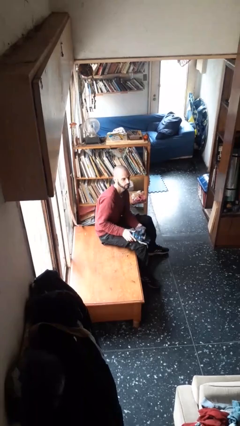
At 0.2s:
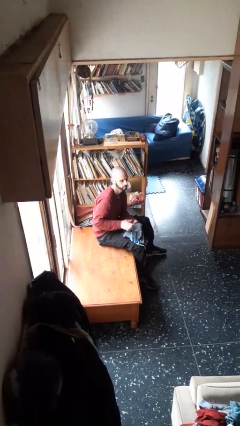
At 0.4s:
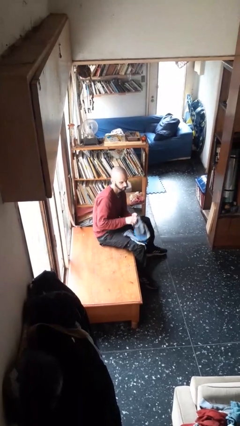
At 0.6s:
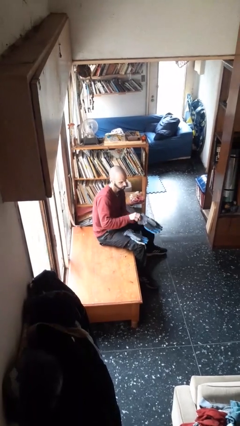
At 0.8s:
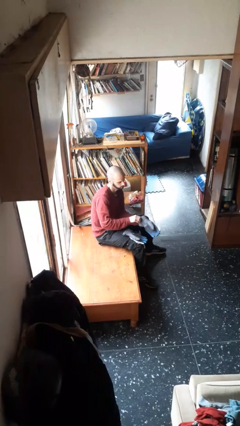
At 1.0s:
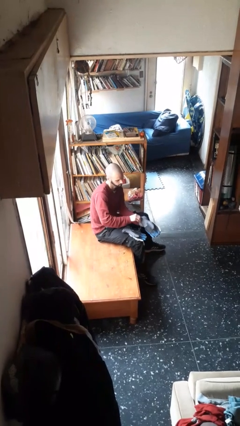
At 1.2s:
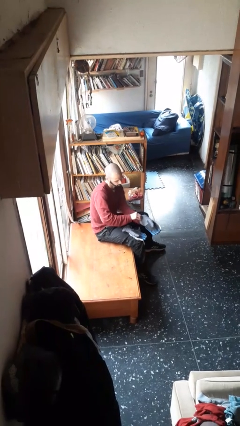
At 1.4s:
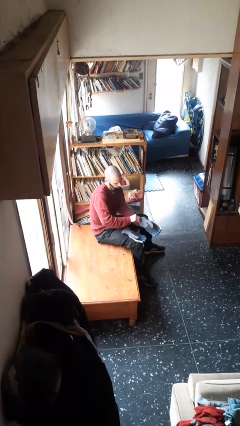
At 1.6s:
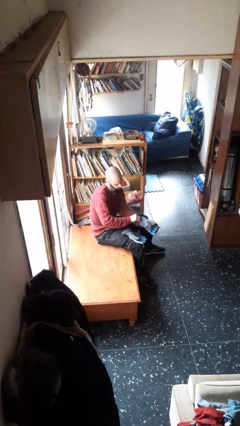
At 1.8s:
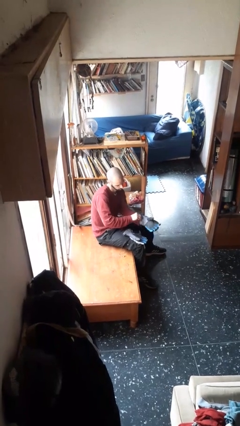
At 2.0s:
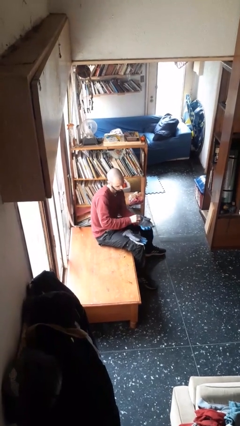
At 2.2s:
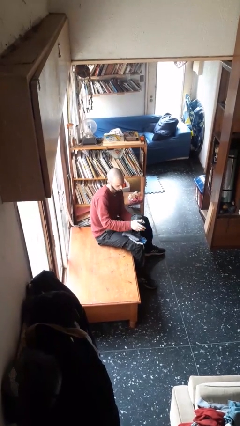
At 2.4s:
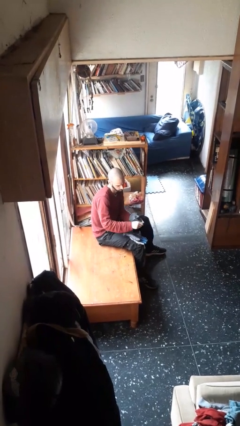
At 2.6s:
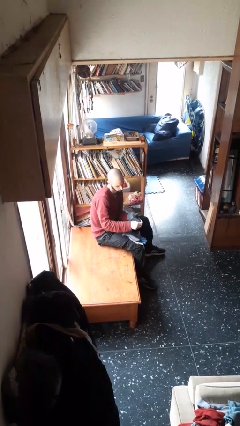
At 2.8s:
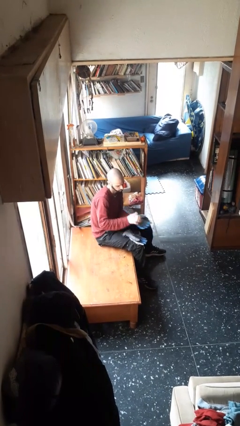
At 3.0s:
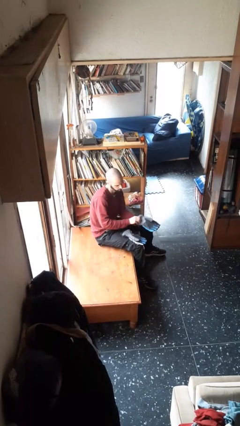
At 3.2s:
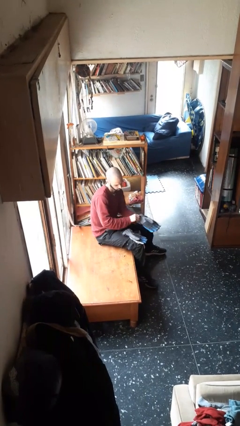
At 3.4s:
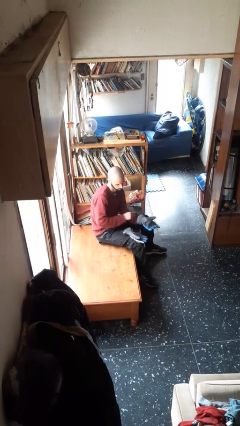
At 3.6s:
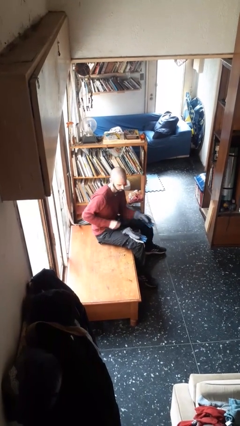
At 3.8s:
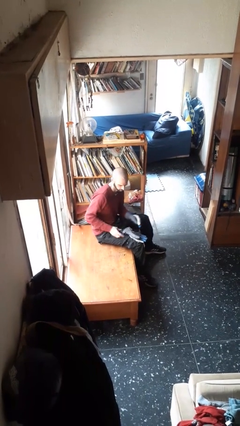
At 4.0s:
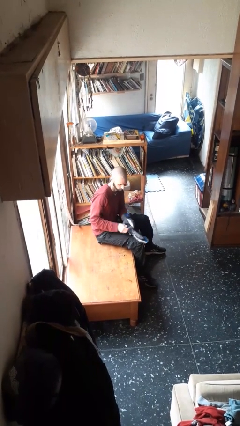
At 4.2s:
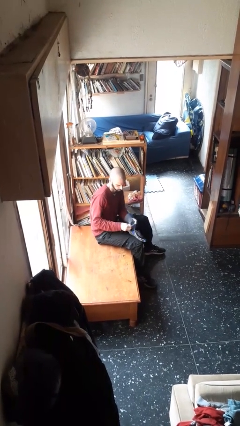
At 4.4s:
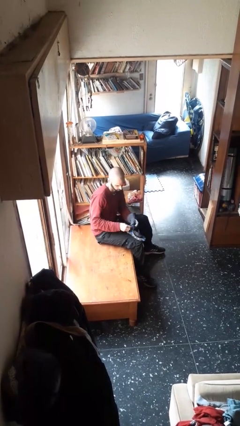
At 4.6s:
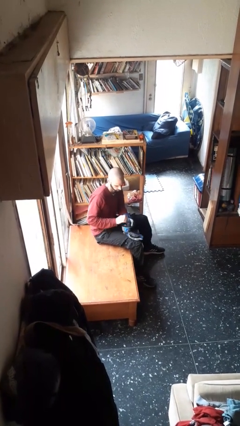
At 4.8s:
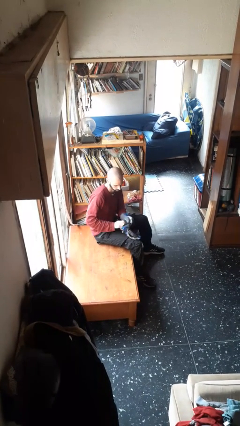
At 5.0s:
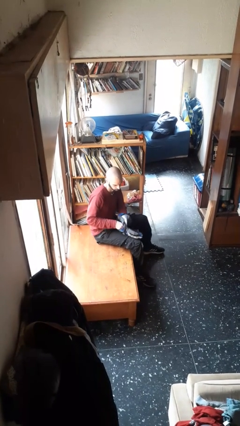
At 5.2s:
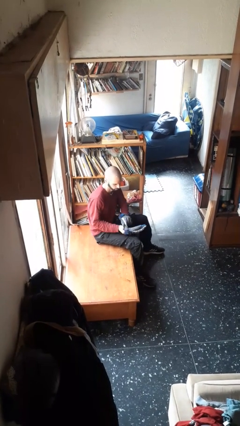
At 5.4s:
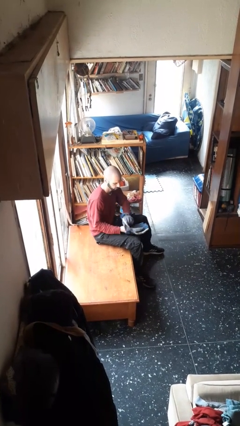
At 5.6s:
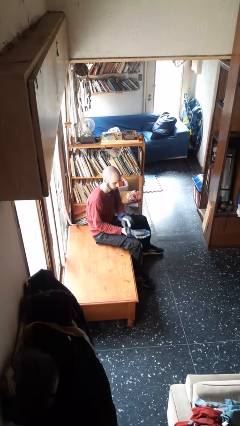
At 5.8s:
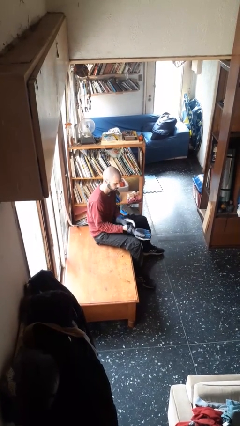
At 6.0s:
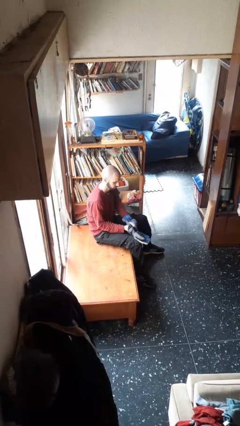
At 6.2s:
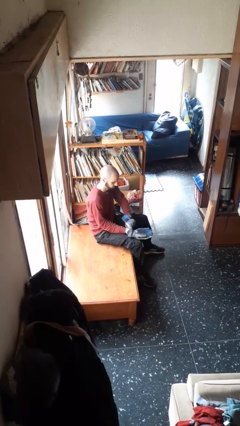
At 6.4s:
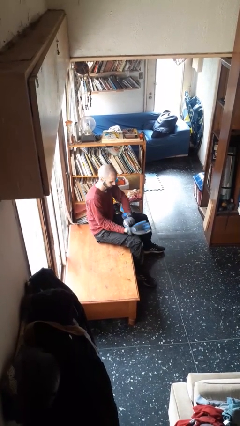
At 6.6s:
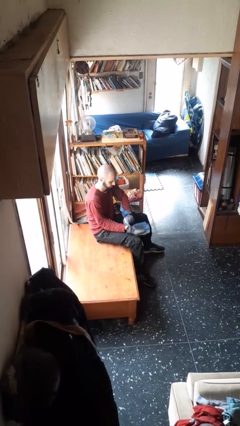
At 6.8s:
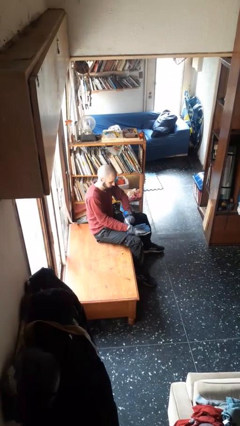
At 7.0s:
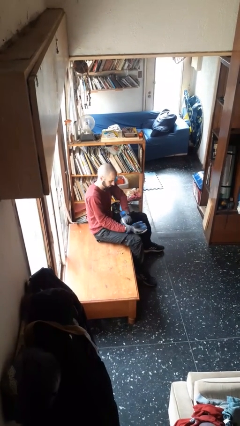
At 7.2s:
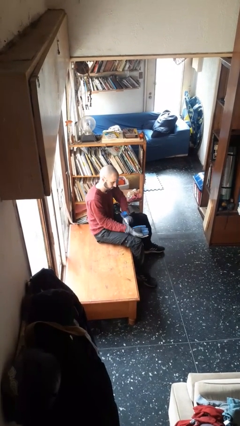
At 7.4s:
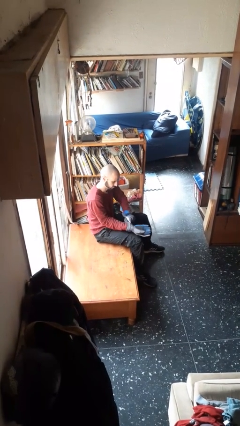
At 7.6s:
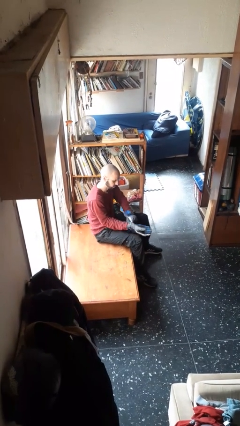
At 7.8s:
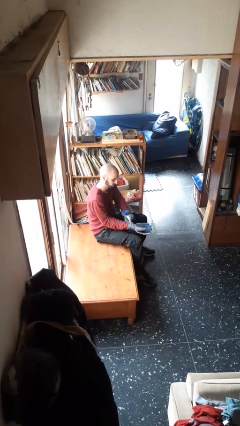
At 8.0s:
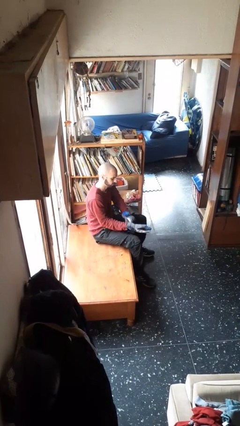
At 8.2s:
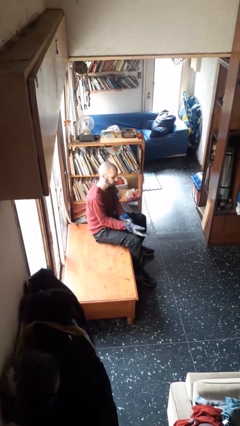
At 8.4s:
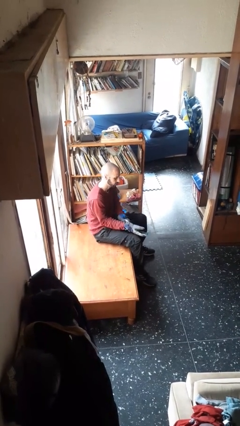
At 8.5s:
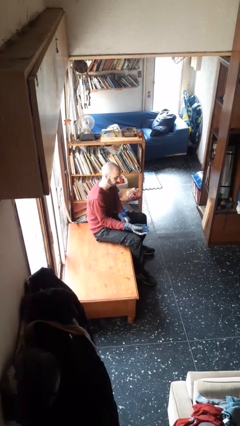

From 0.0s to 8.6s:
person puts on gloves

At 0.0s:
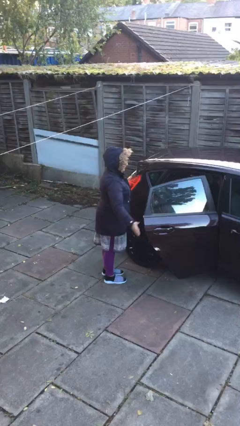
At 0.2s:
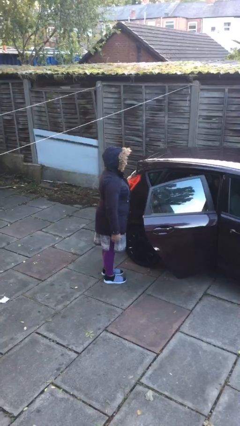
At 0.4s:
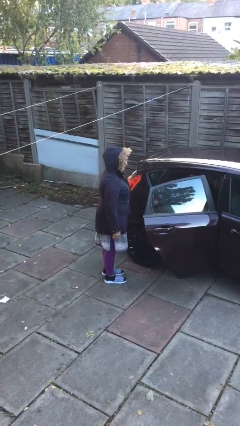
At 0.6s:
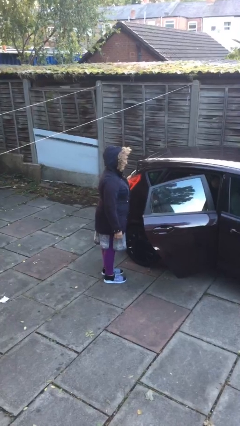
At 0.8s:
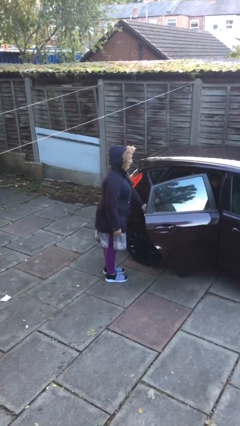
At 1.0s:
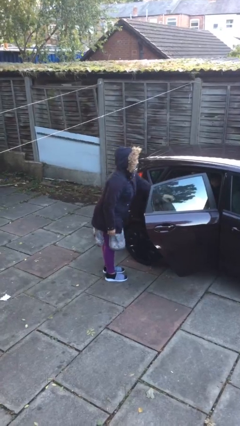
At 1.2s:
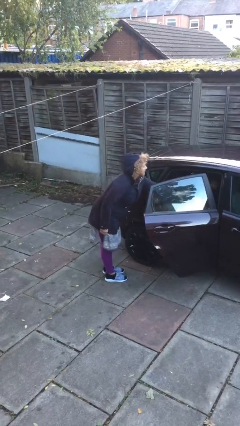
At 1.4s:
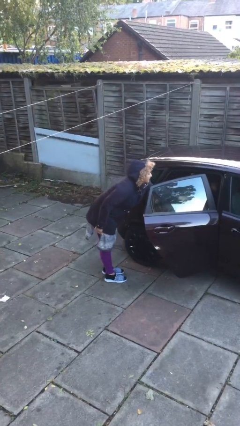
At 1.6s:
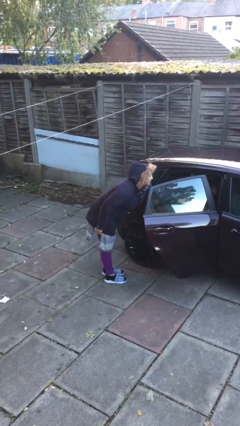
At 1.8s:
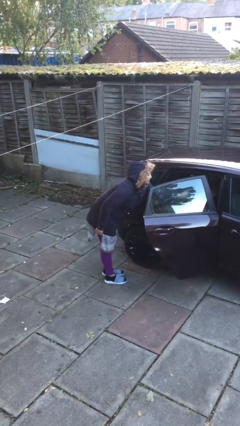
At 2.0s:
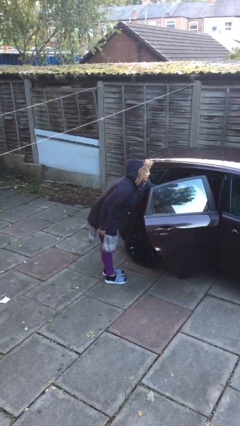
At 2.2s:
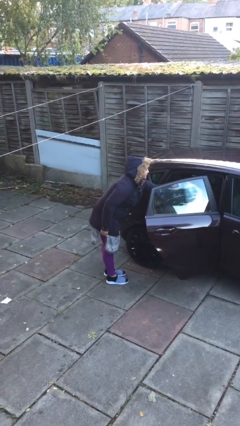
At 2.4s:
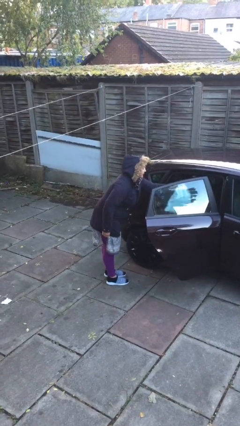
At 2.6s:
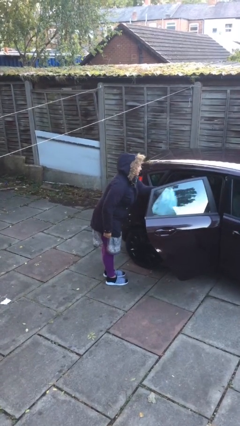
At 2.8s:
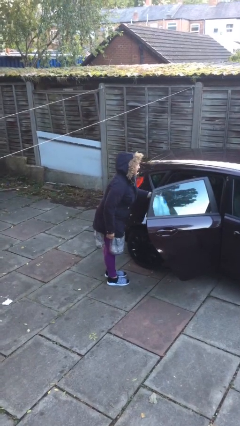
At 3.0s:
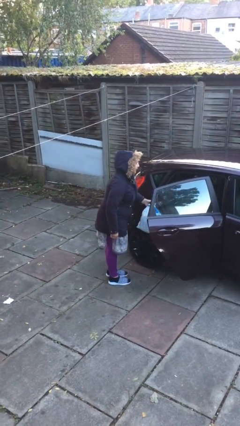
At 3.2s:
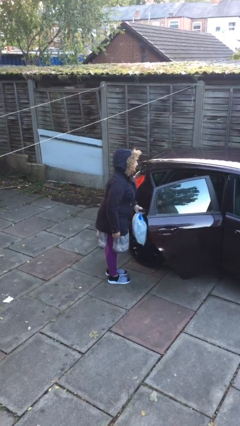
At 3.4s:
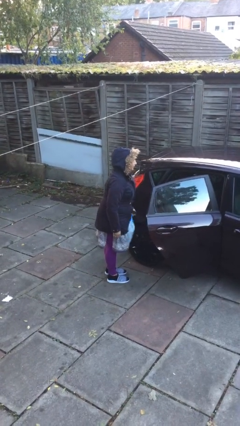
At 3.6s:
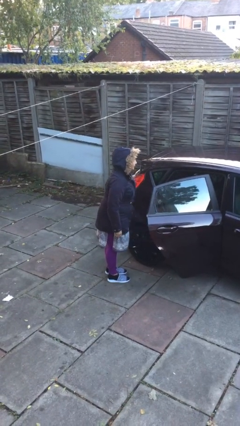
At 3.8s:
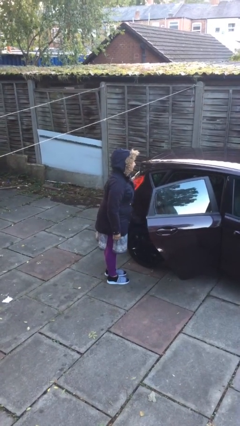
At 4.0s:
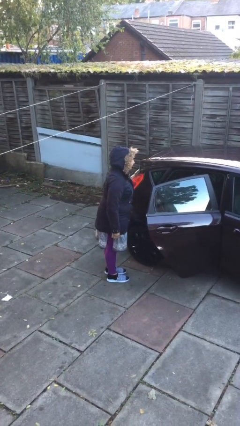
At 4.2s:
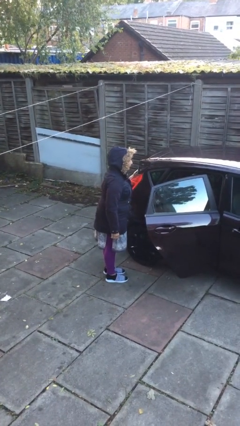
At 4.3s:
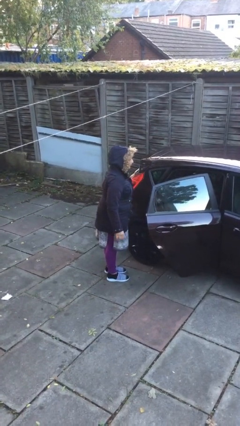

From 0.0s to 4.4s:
person unloads car

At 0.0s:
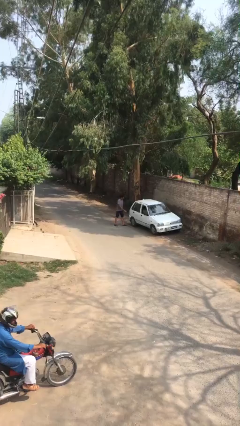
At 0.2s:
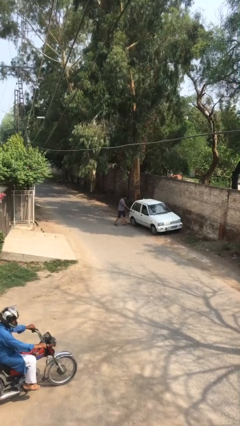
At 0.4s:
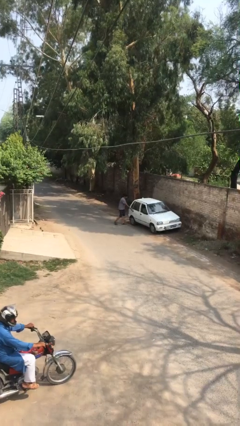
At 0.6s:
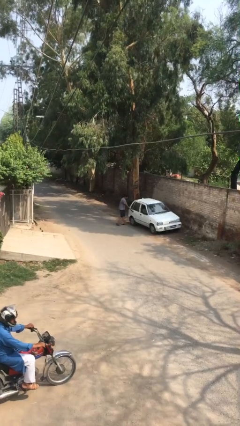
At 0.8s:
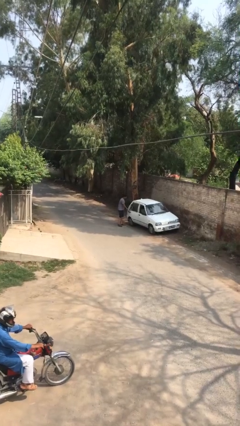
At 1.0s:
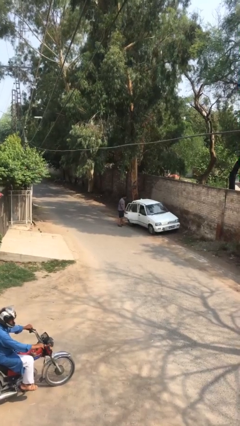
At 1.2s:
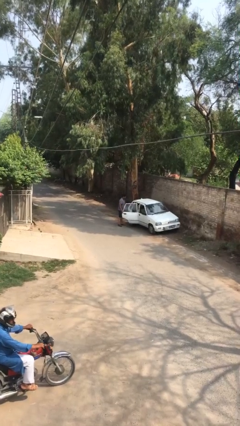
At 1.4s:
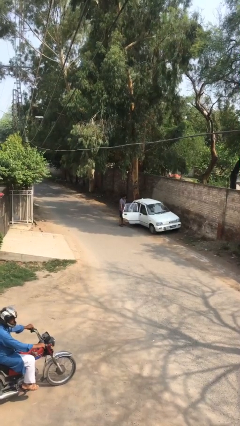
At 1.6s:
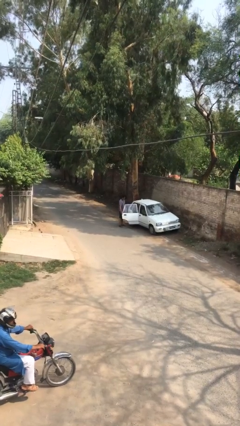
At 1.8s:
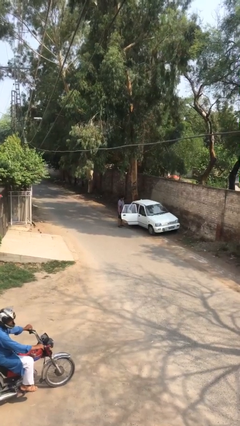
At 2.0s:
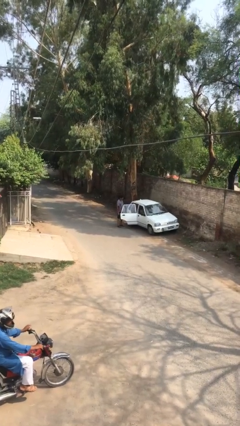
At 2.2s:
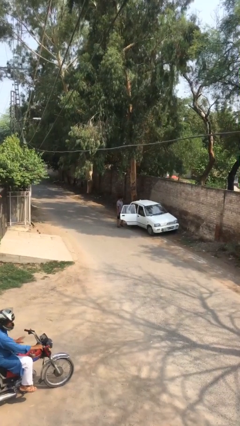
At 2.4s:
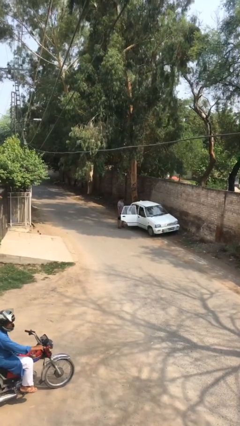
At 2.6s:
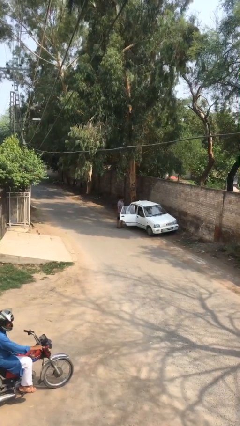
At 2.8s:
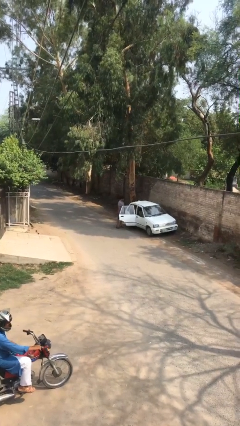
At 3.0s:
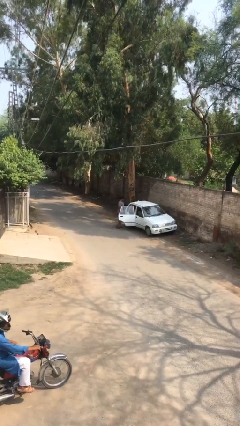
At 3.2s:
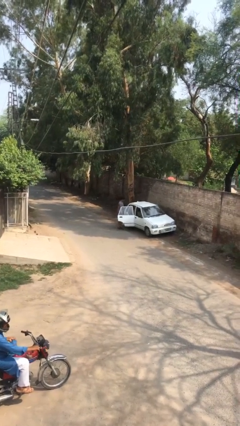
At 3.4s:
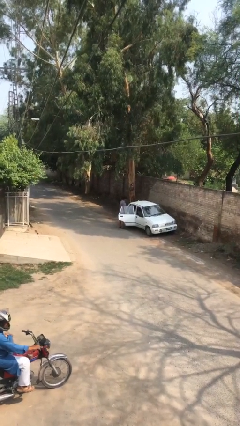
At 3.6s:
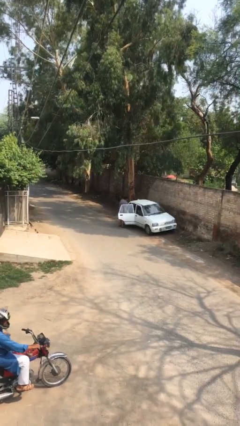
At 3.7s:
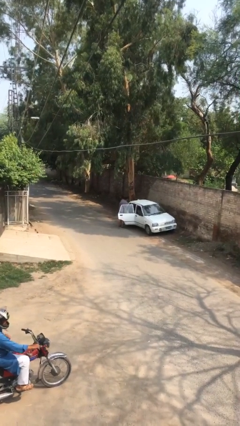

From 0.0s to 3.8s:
person opens car door

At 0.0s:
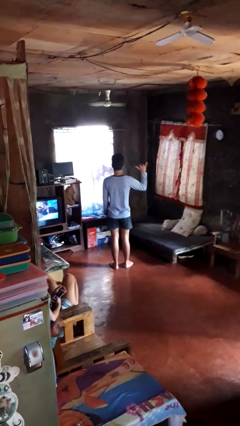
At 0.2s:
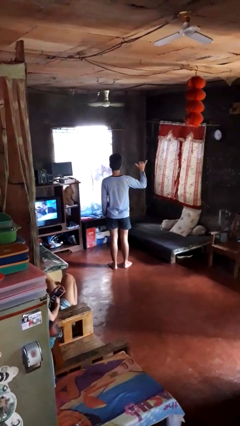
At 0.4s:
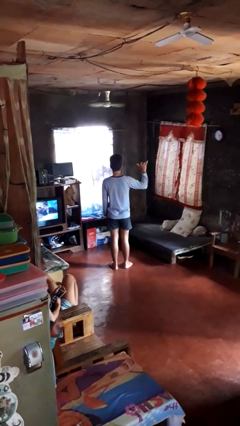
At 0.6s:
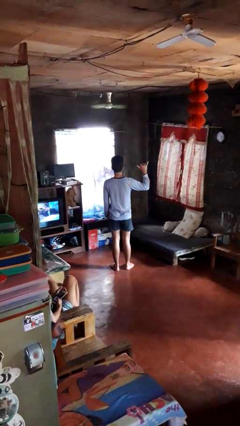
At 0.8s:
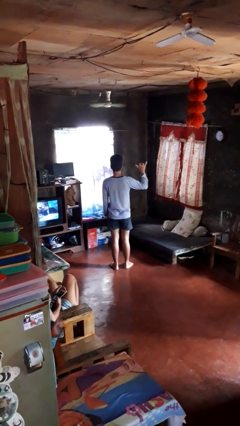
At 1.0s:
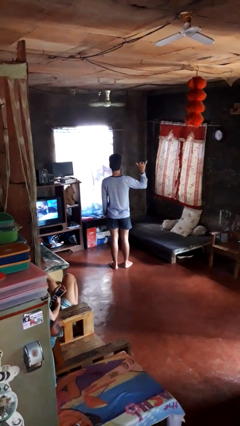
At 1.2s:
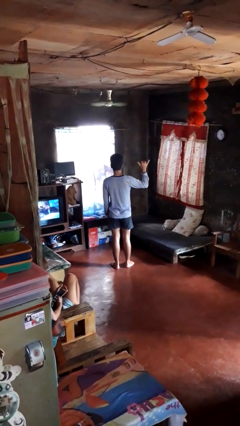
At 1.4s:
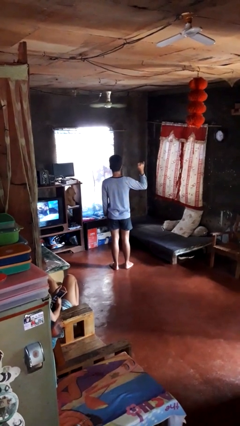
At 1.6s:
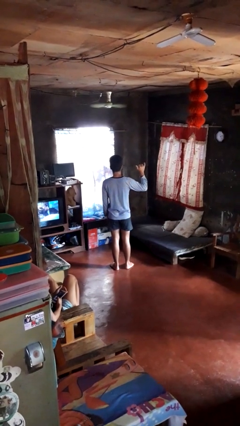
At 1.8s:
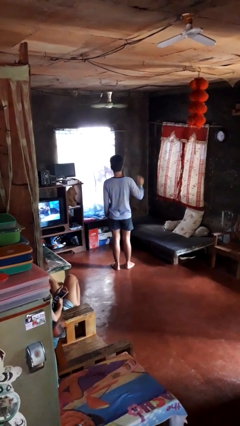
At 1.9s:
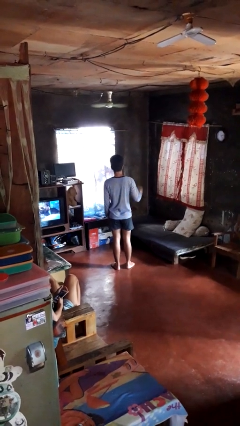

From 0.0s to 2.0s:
person gestures hang loose
